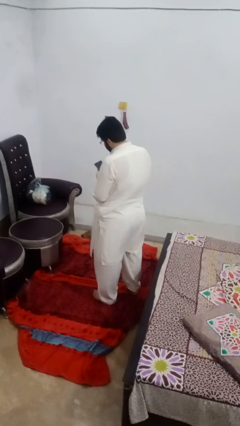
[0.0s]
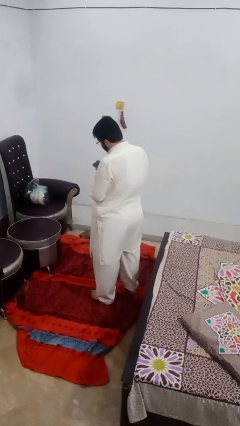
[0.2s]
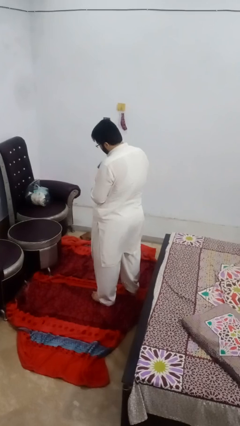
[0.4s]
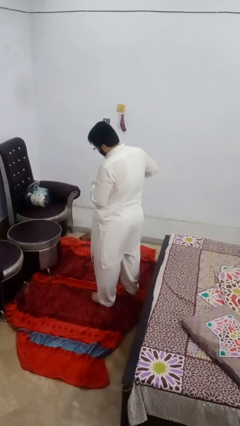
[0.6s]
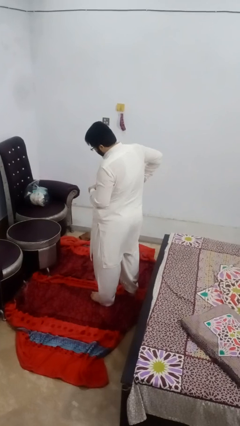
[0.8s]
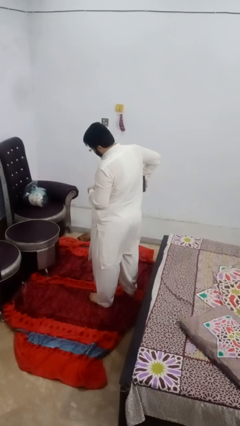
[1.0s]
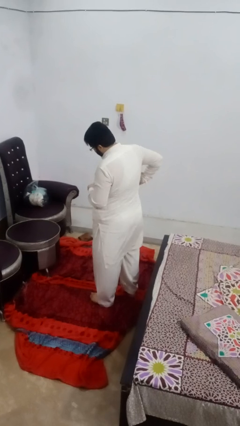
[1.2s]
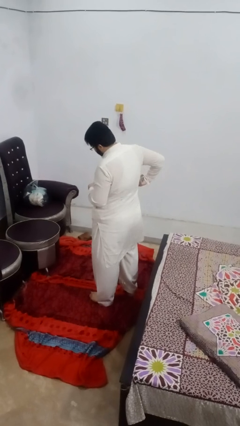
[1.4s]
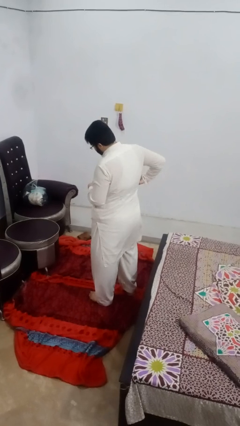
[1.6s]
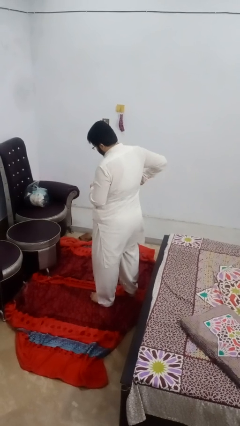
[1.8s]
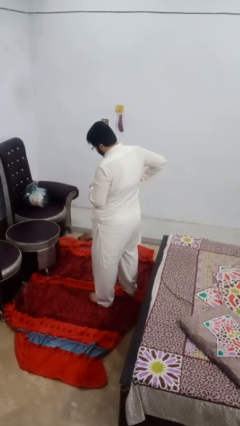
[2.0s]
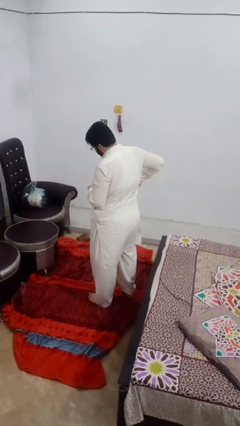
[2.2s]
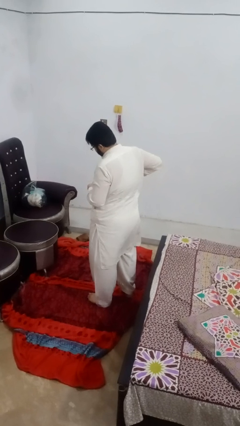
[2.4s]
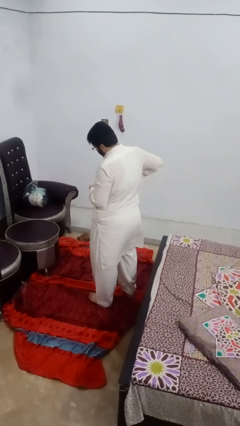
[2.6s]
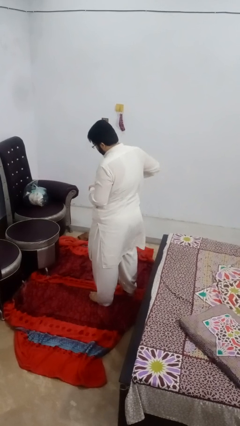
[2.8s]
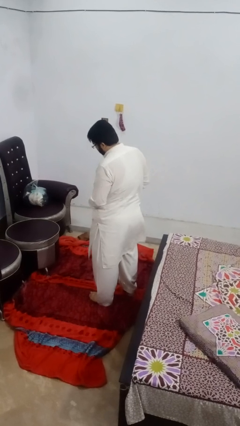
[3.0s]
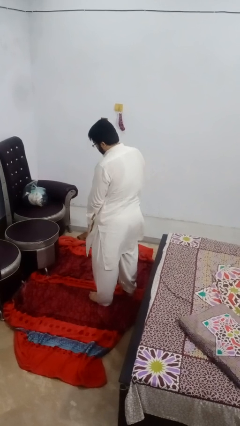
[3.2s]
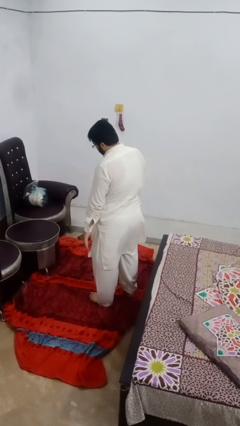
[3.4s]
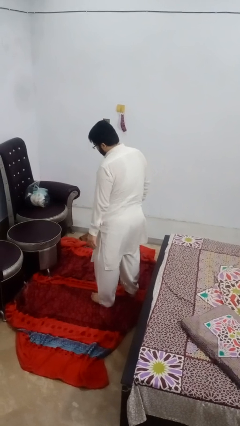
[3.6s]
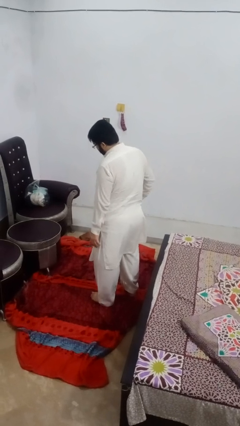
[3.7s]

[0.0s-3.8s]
person puts phone into pocket

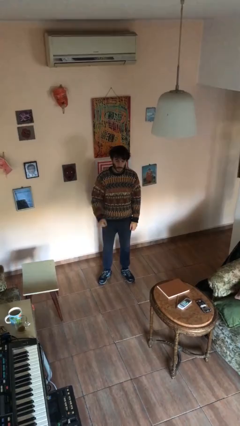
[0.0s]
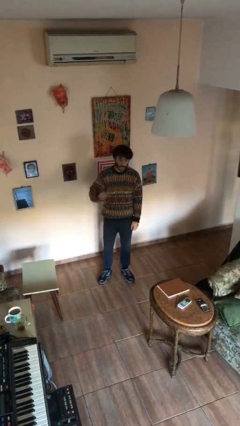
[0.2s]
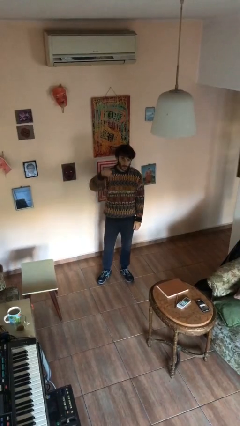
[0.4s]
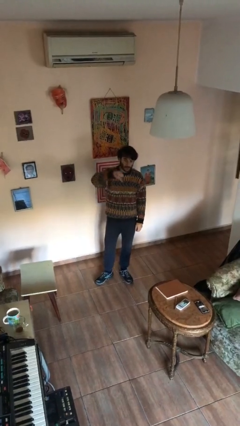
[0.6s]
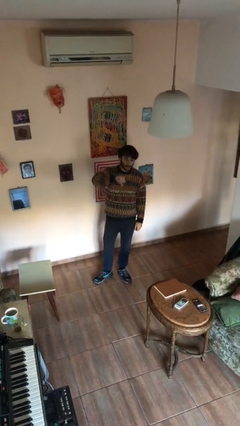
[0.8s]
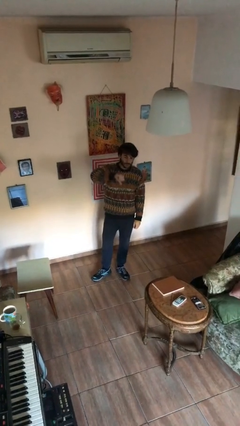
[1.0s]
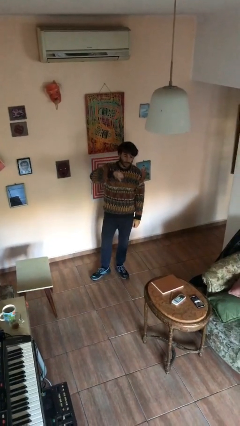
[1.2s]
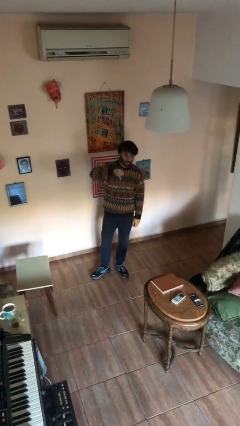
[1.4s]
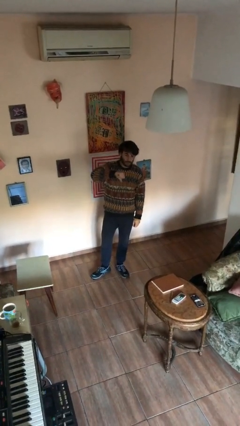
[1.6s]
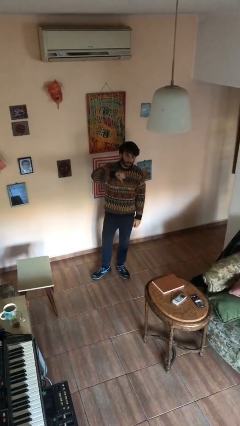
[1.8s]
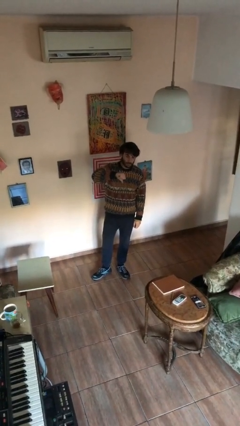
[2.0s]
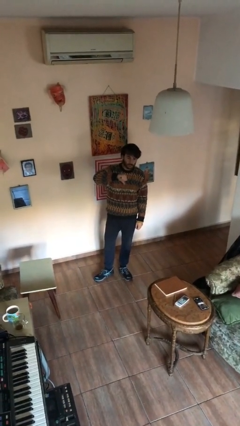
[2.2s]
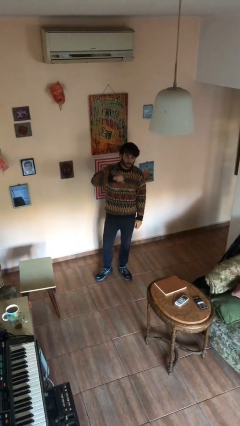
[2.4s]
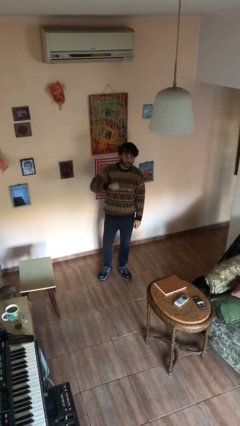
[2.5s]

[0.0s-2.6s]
person gestures thumbs down

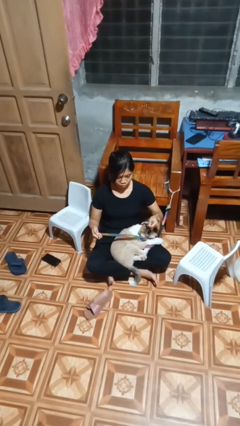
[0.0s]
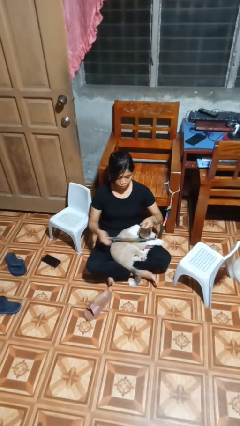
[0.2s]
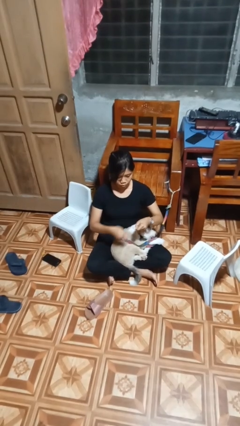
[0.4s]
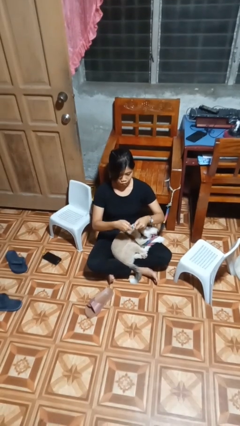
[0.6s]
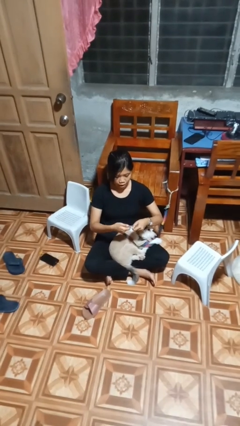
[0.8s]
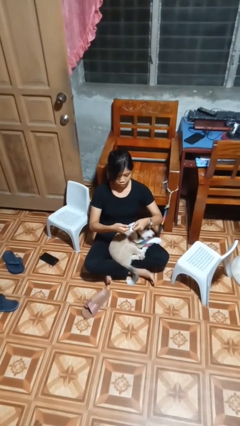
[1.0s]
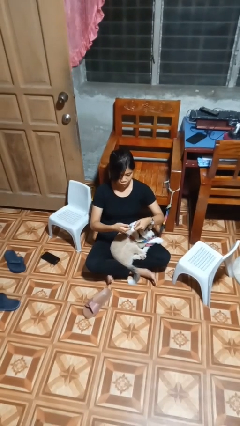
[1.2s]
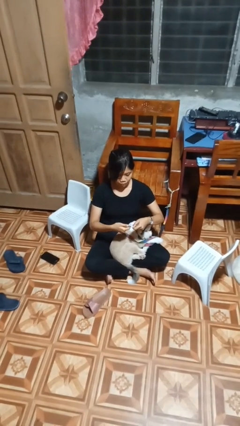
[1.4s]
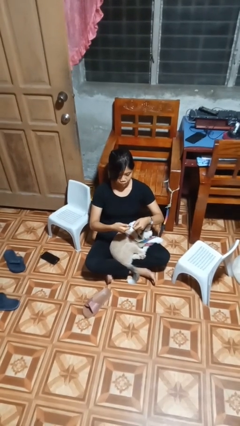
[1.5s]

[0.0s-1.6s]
person attaches leash to dog

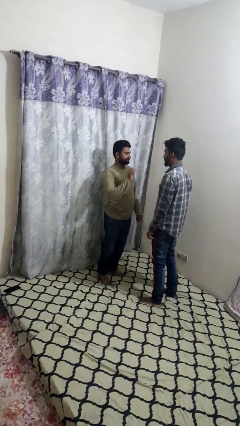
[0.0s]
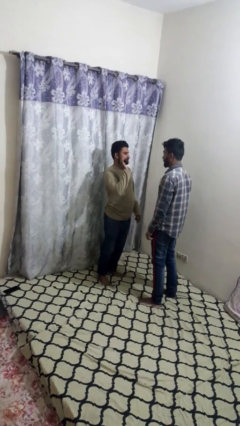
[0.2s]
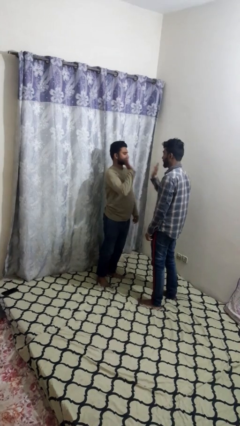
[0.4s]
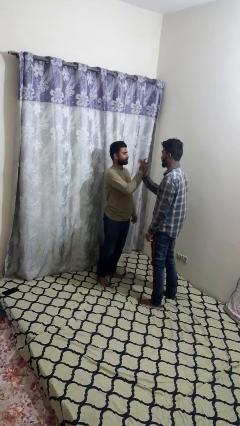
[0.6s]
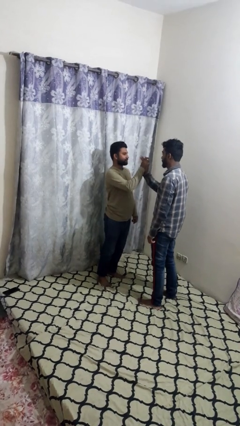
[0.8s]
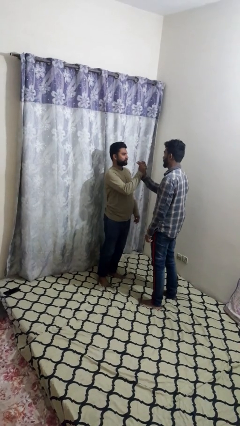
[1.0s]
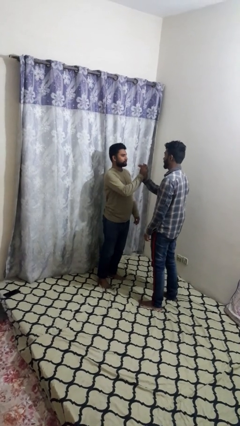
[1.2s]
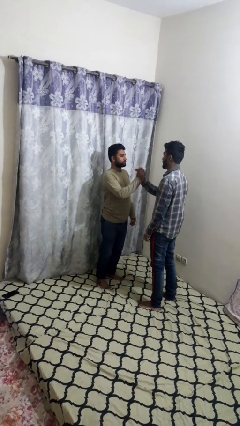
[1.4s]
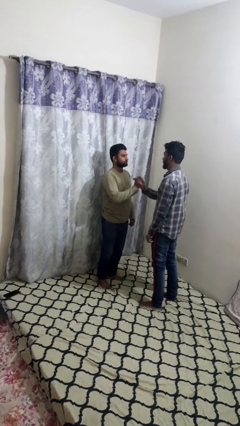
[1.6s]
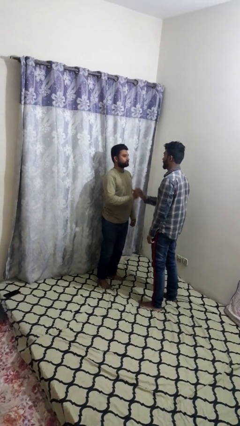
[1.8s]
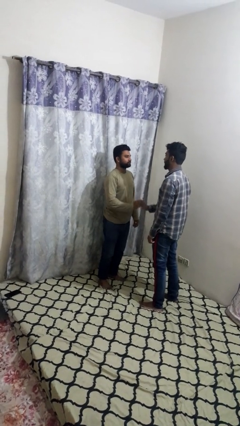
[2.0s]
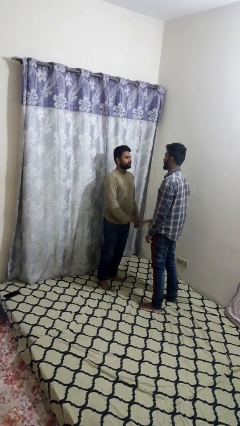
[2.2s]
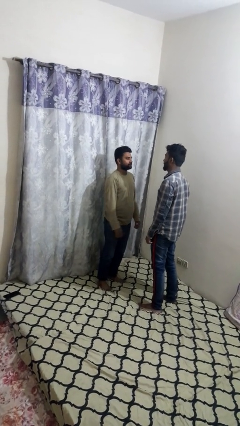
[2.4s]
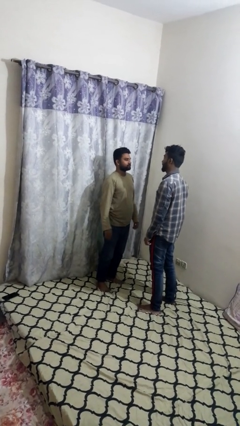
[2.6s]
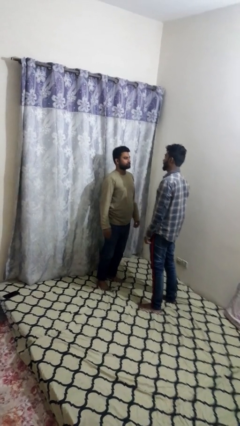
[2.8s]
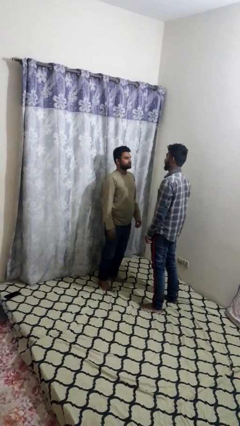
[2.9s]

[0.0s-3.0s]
person highfives hand

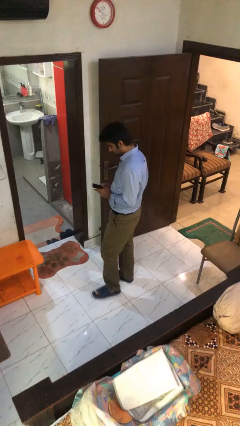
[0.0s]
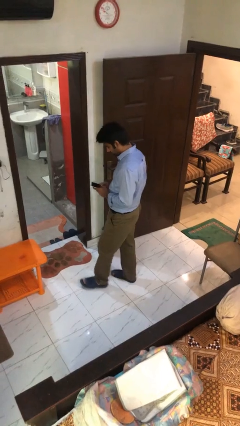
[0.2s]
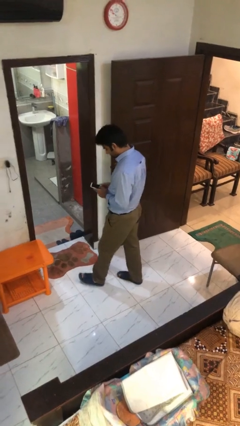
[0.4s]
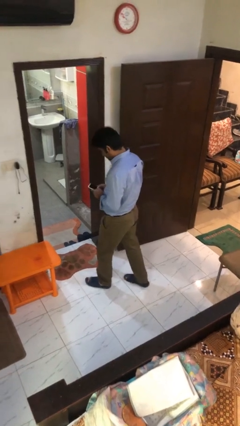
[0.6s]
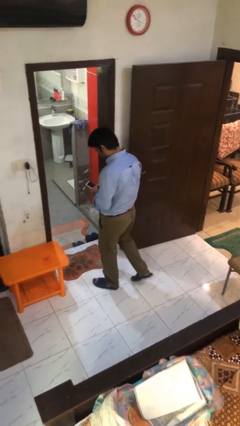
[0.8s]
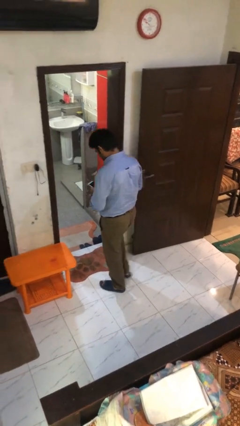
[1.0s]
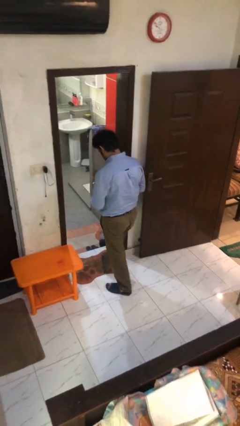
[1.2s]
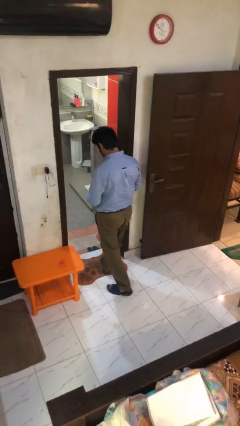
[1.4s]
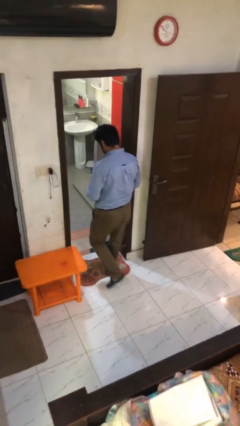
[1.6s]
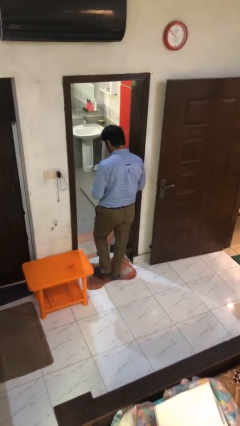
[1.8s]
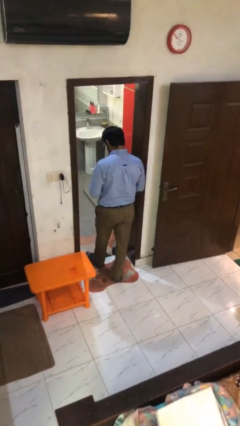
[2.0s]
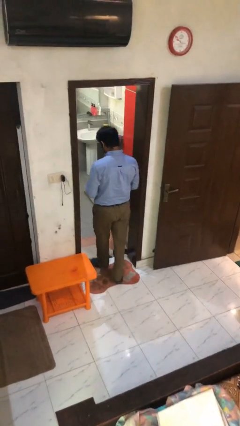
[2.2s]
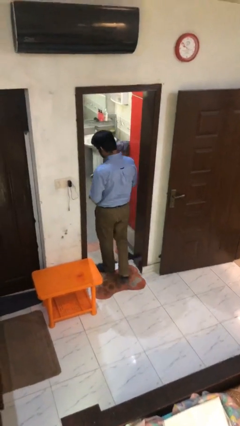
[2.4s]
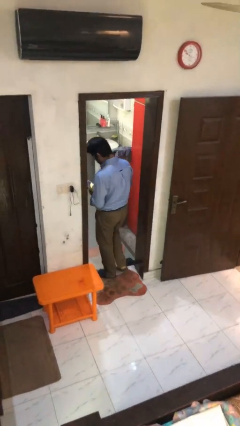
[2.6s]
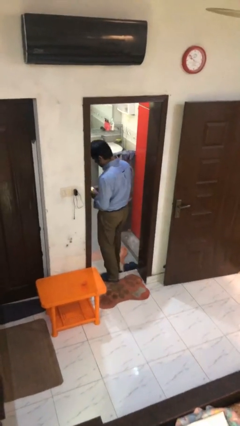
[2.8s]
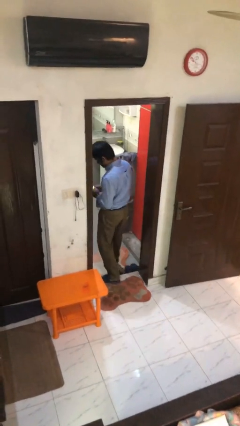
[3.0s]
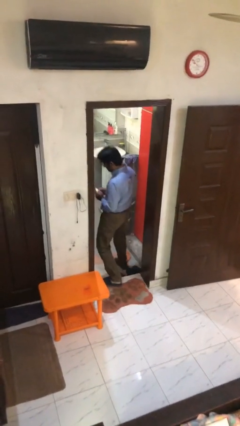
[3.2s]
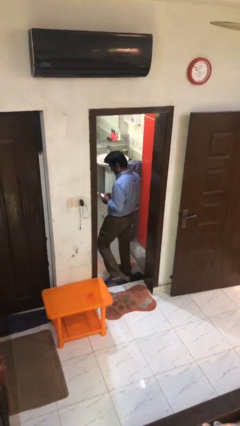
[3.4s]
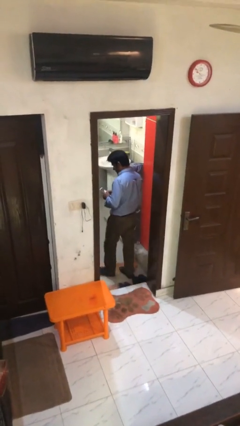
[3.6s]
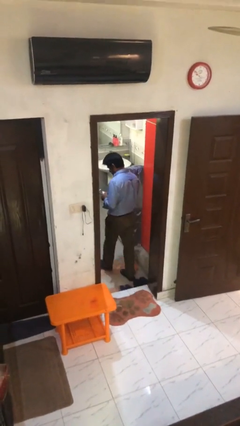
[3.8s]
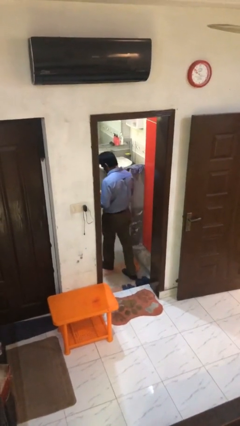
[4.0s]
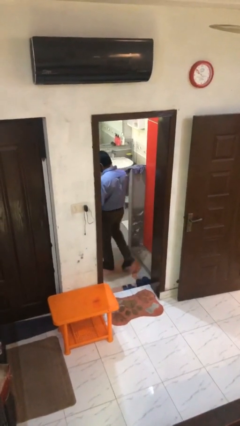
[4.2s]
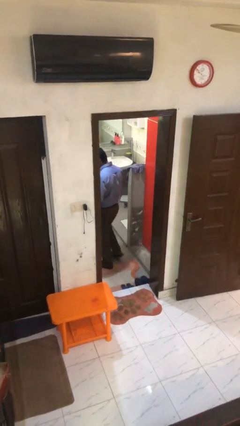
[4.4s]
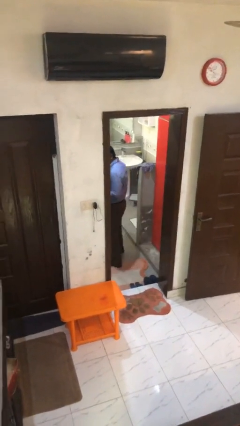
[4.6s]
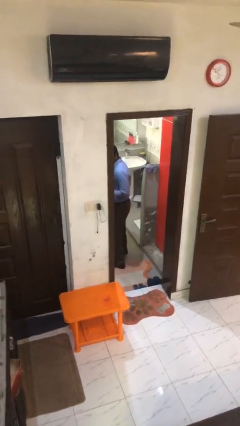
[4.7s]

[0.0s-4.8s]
person texts on phone

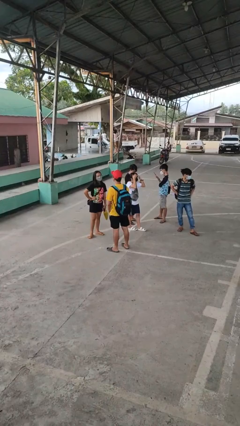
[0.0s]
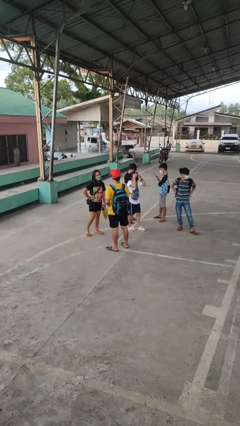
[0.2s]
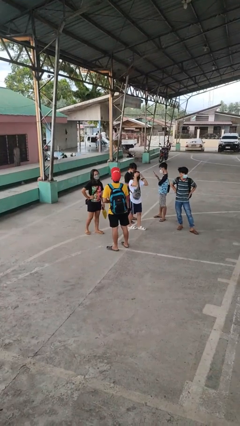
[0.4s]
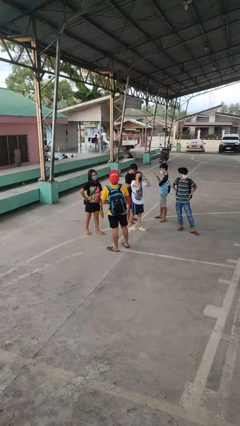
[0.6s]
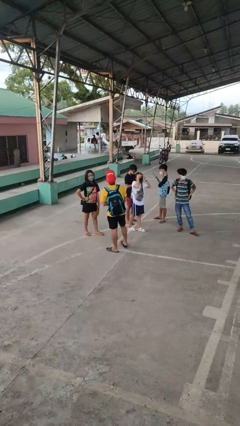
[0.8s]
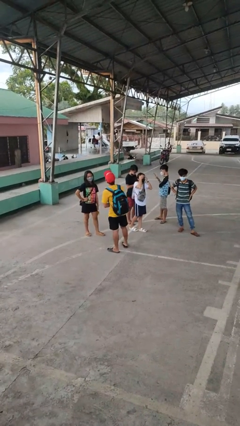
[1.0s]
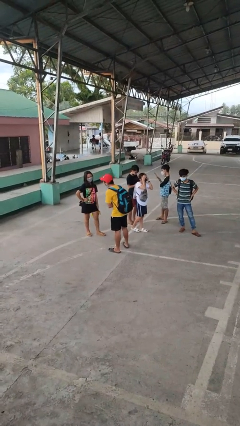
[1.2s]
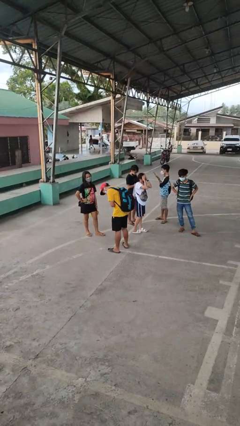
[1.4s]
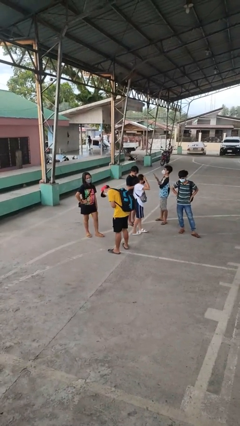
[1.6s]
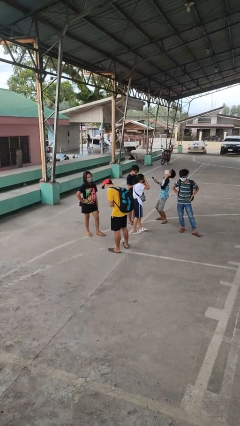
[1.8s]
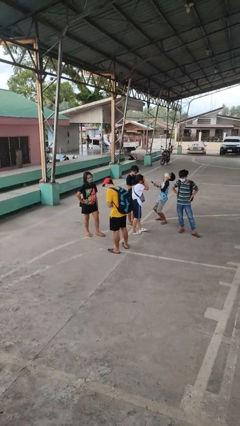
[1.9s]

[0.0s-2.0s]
person laughs with person
